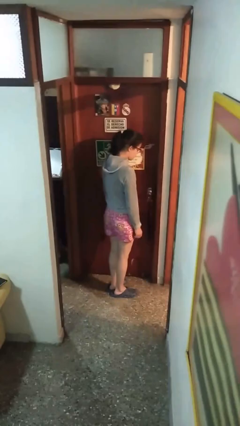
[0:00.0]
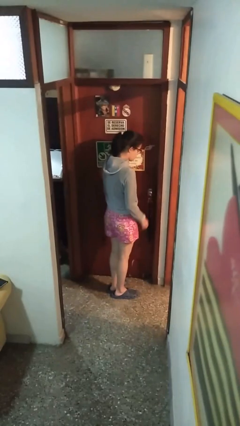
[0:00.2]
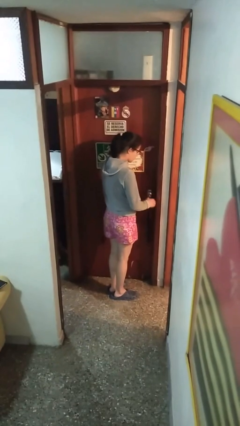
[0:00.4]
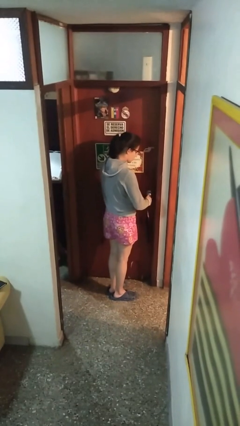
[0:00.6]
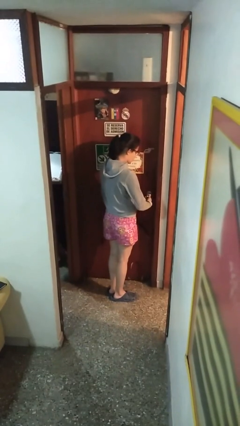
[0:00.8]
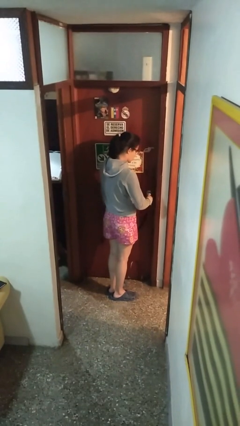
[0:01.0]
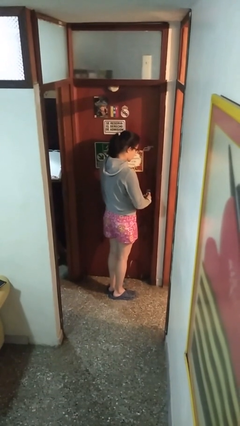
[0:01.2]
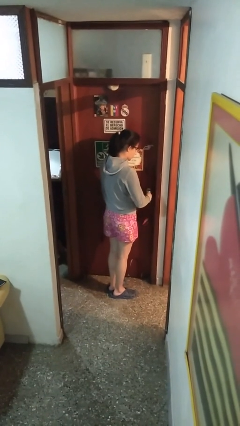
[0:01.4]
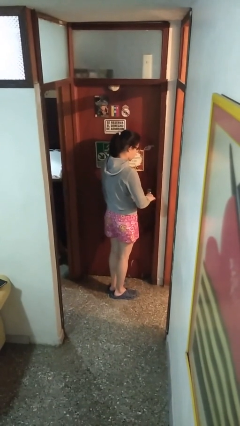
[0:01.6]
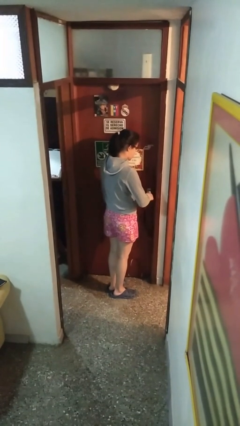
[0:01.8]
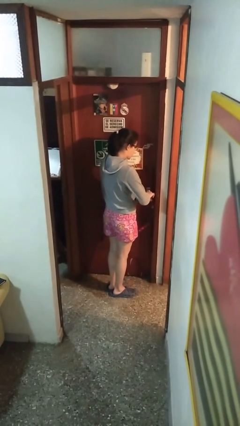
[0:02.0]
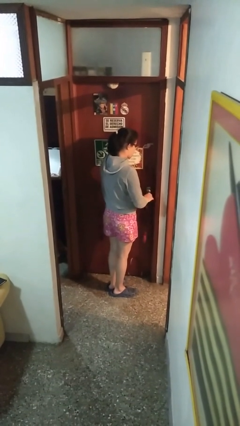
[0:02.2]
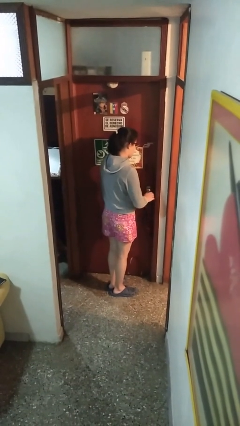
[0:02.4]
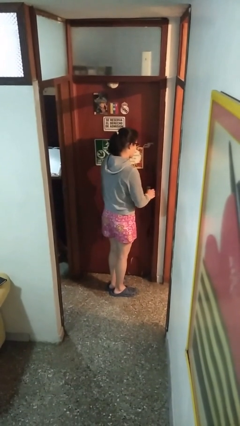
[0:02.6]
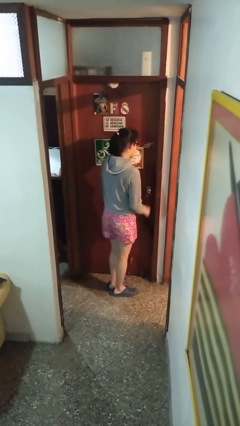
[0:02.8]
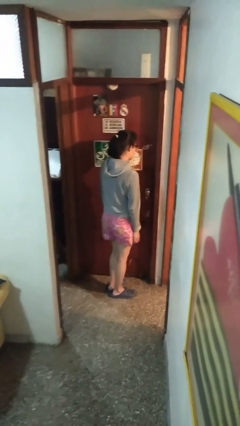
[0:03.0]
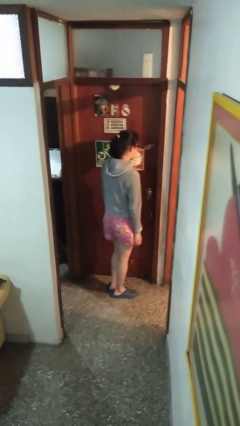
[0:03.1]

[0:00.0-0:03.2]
person unlocks door with keys

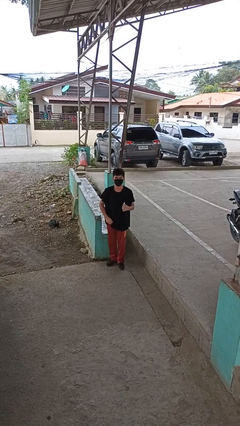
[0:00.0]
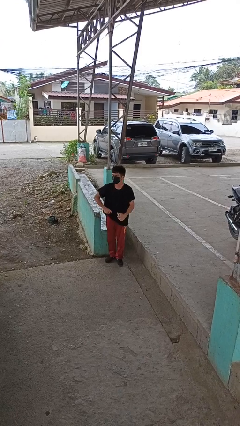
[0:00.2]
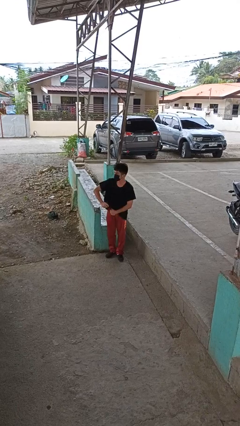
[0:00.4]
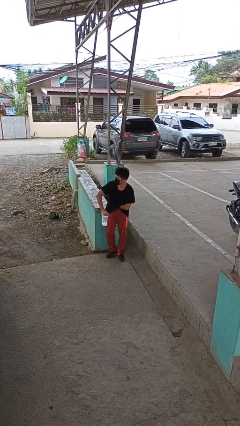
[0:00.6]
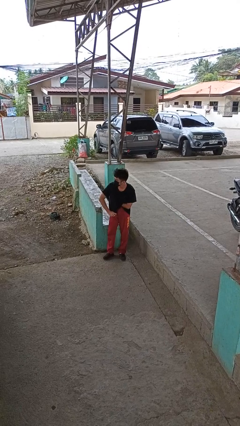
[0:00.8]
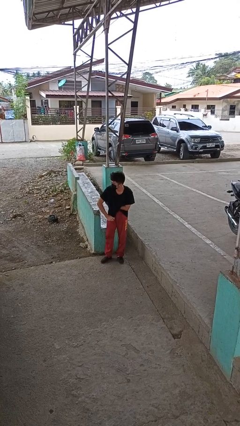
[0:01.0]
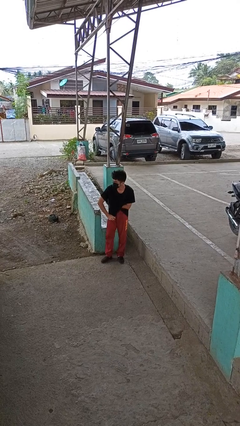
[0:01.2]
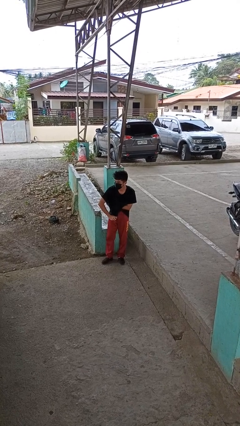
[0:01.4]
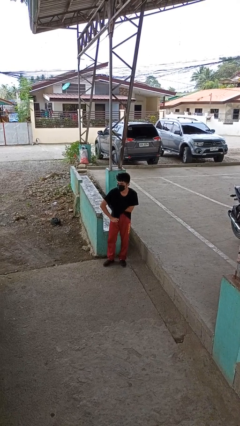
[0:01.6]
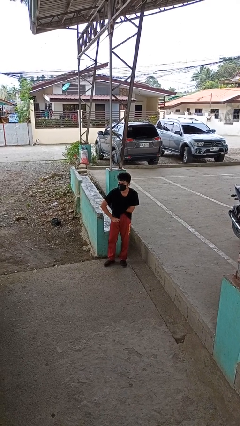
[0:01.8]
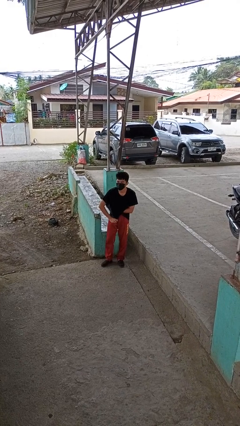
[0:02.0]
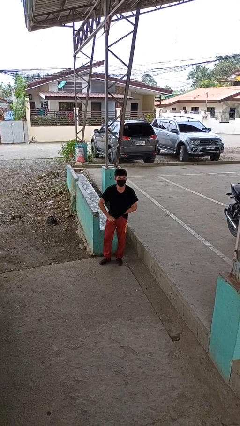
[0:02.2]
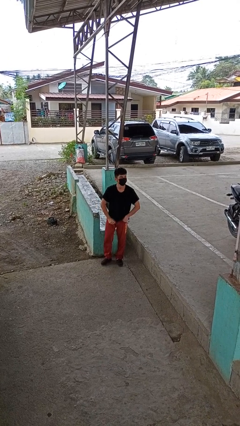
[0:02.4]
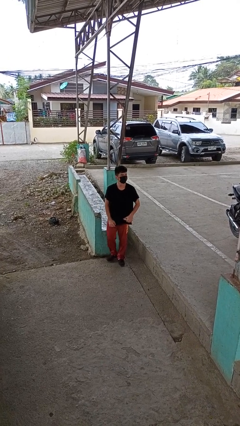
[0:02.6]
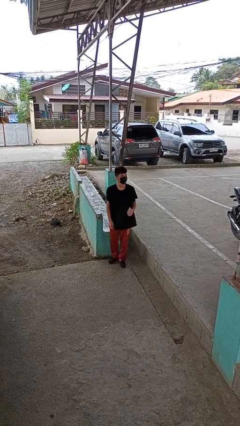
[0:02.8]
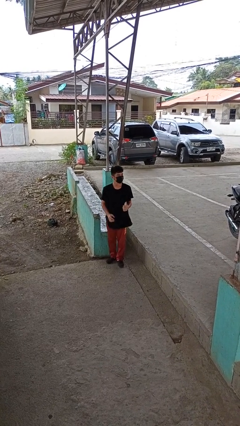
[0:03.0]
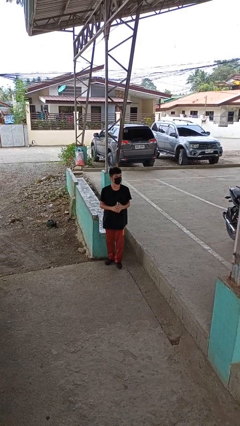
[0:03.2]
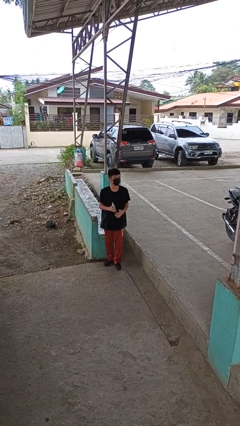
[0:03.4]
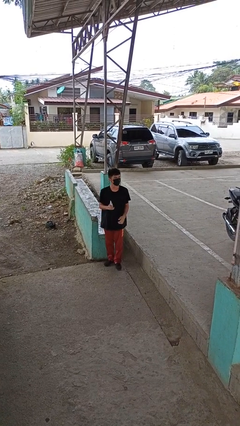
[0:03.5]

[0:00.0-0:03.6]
person applies deodorant

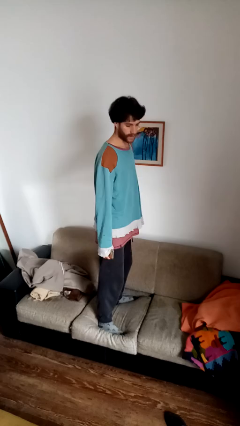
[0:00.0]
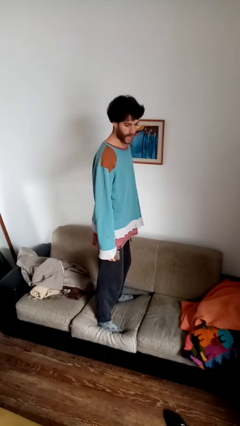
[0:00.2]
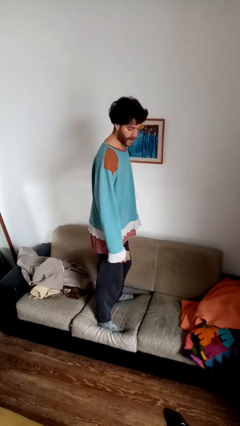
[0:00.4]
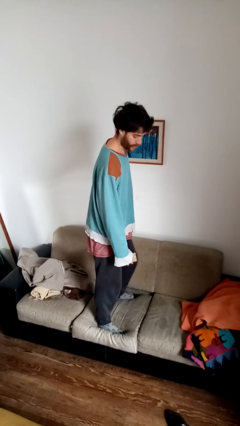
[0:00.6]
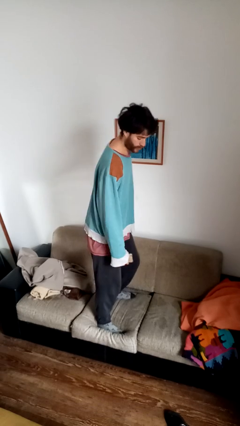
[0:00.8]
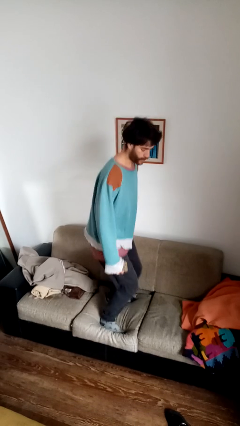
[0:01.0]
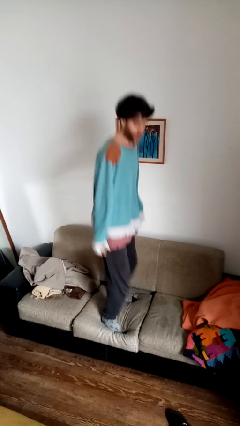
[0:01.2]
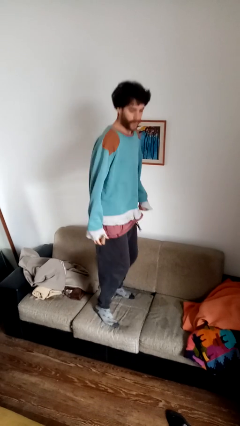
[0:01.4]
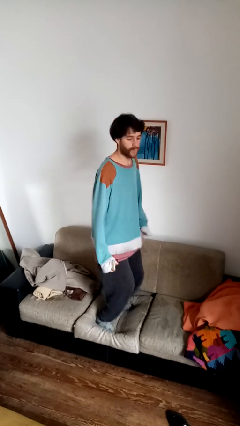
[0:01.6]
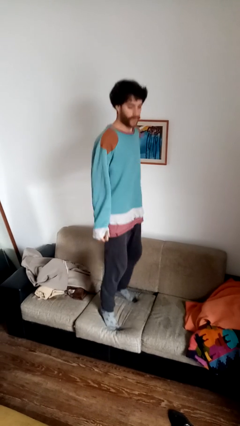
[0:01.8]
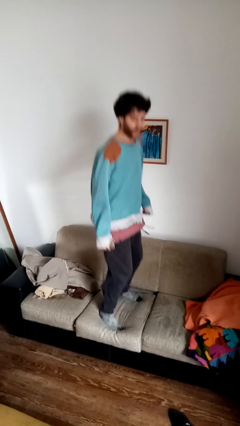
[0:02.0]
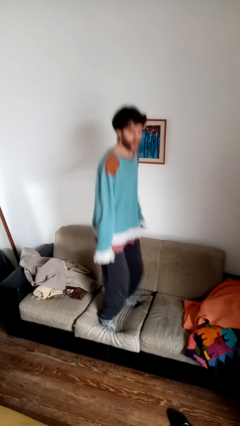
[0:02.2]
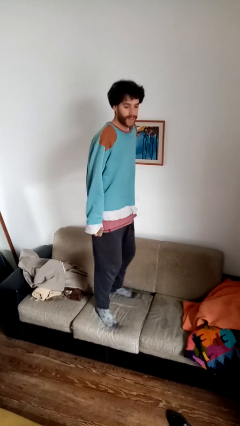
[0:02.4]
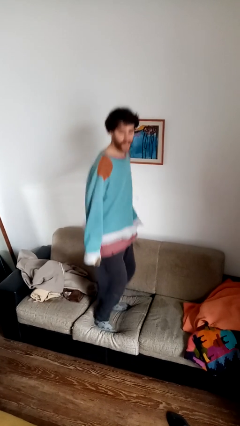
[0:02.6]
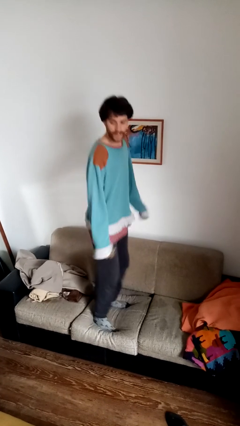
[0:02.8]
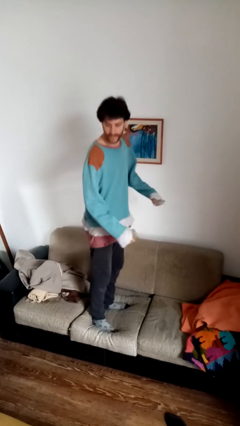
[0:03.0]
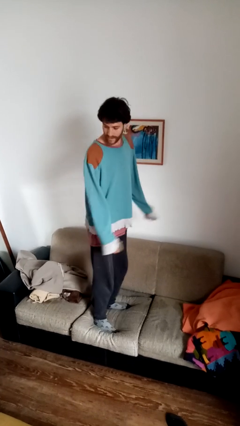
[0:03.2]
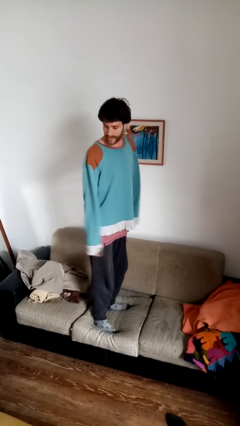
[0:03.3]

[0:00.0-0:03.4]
person jumps on couch

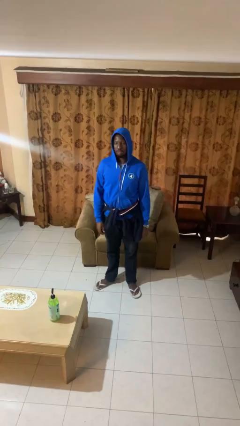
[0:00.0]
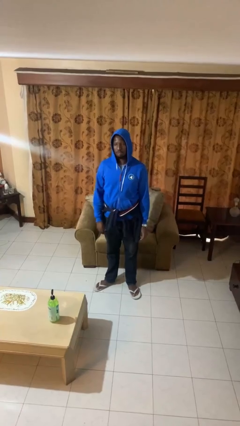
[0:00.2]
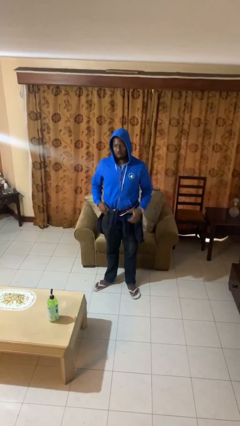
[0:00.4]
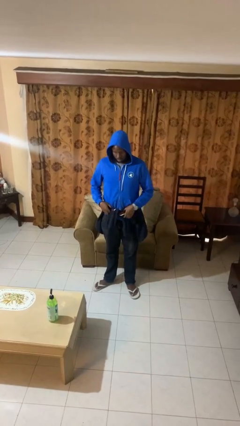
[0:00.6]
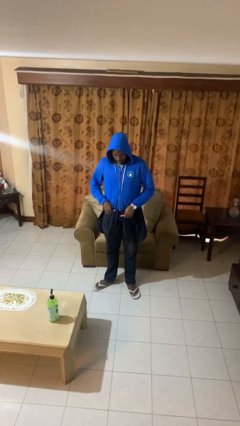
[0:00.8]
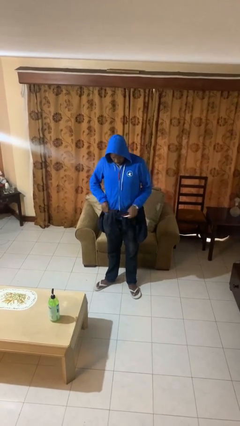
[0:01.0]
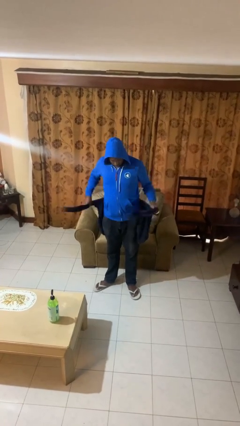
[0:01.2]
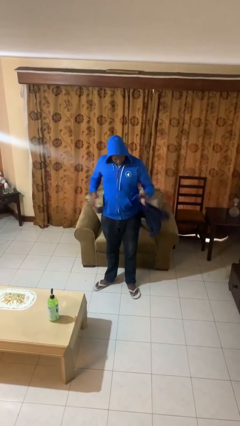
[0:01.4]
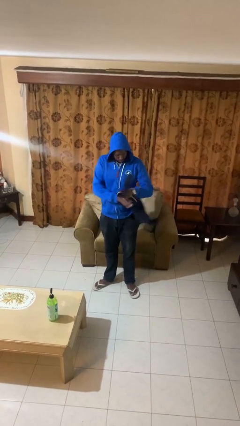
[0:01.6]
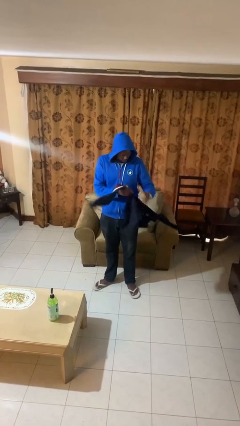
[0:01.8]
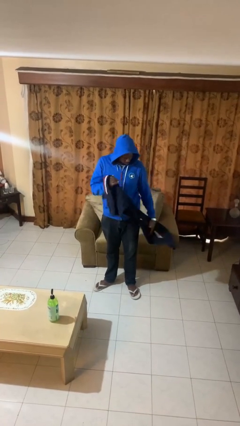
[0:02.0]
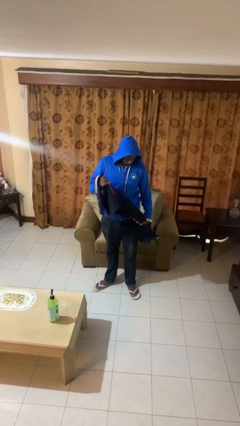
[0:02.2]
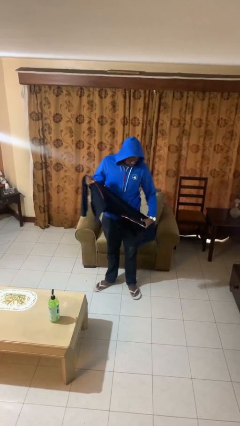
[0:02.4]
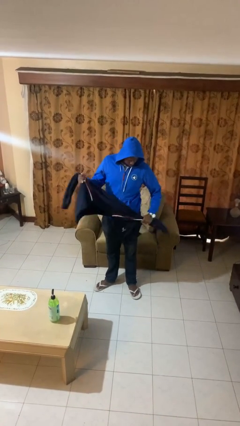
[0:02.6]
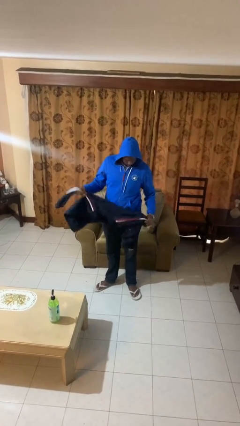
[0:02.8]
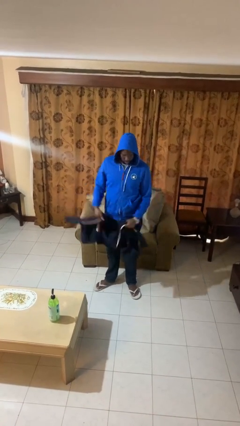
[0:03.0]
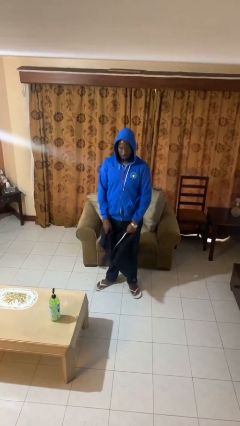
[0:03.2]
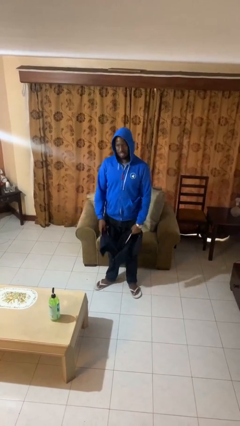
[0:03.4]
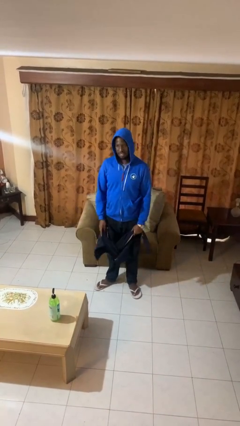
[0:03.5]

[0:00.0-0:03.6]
person unties jacket around waist

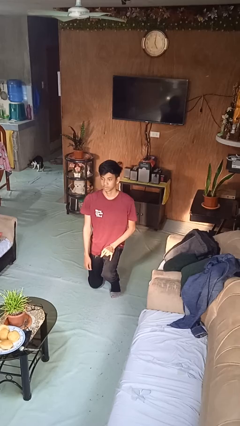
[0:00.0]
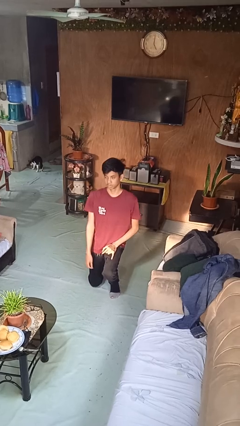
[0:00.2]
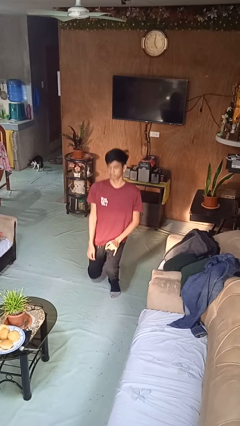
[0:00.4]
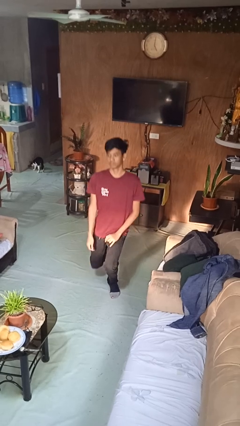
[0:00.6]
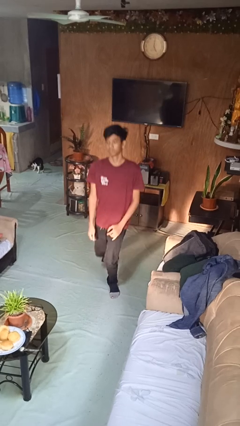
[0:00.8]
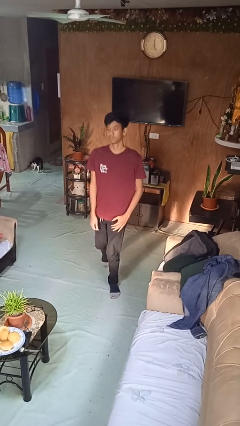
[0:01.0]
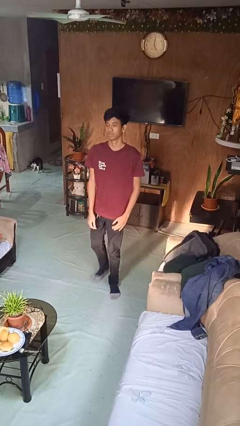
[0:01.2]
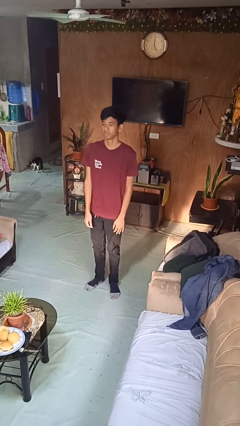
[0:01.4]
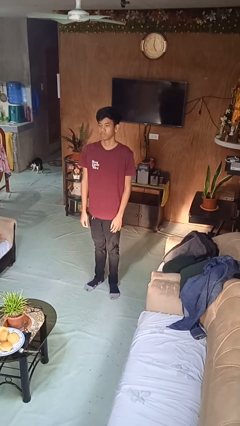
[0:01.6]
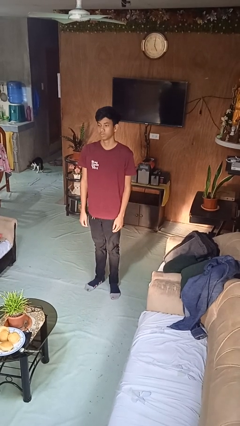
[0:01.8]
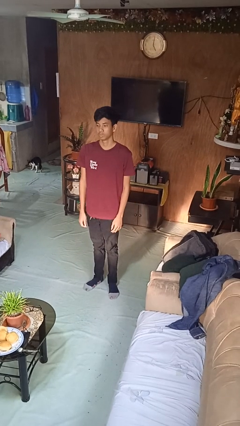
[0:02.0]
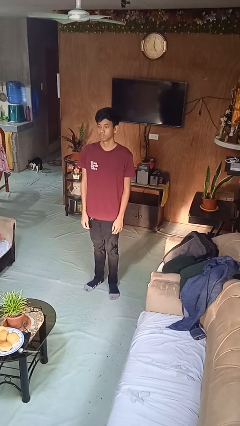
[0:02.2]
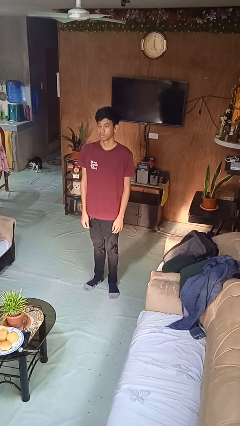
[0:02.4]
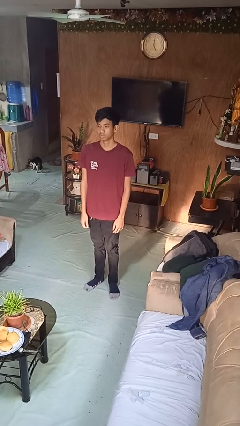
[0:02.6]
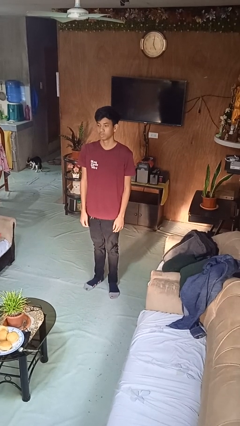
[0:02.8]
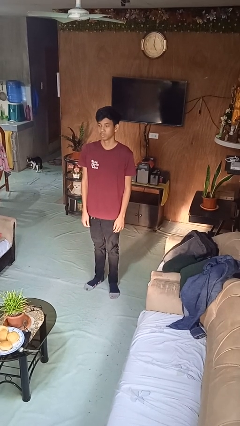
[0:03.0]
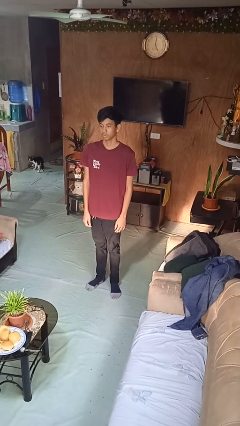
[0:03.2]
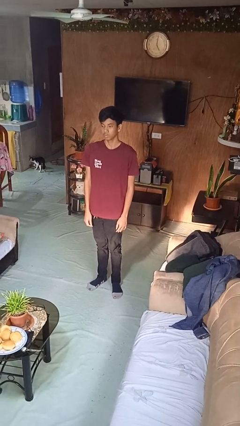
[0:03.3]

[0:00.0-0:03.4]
person stands up from floor

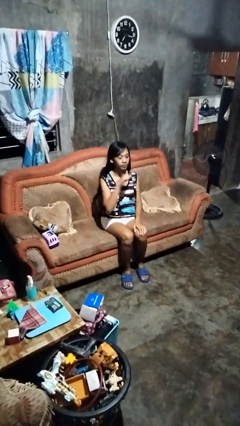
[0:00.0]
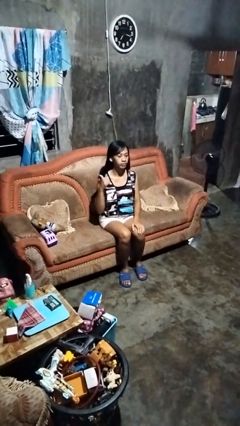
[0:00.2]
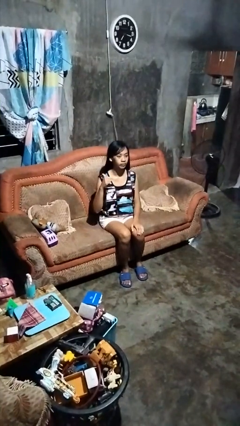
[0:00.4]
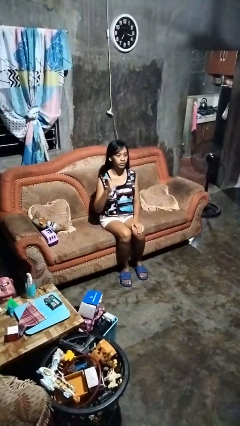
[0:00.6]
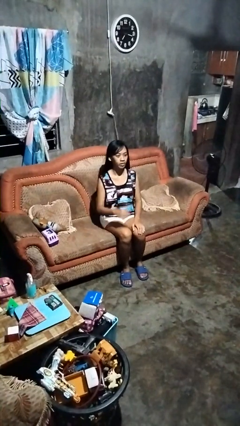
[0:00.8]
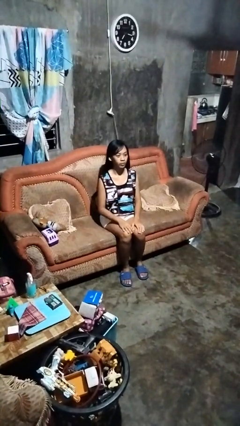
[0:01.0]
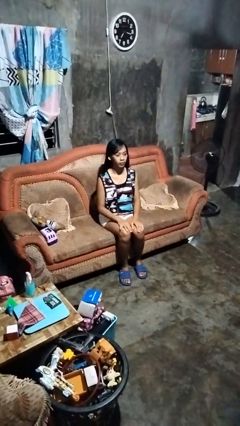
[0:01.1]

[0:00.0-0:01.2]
person pats head
